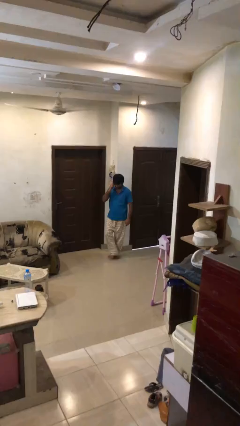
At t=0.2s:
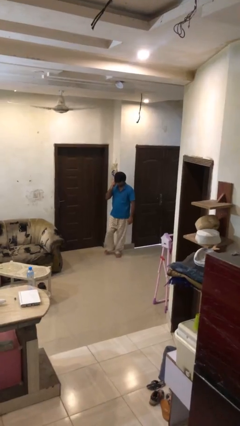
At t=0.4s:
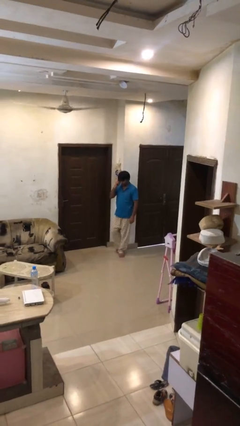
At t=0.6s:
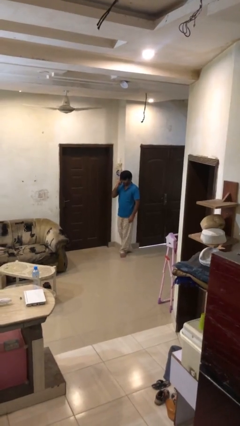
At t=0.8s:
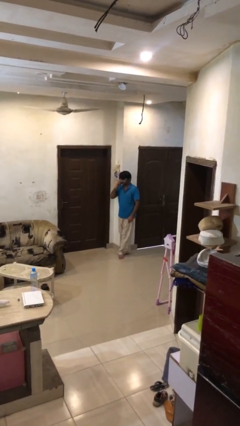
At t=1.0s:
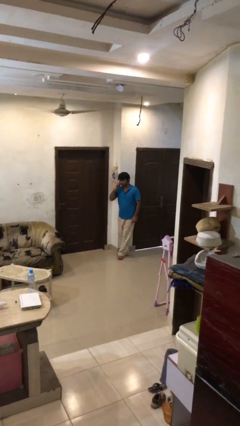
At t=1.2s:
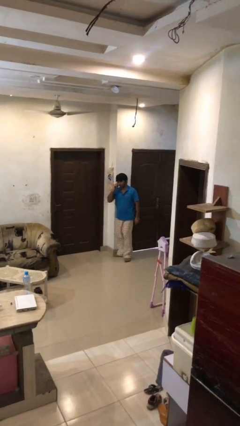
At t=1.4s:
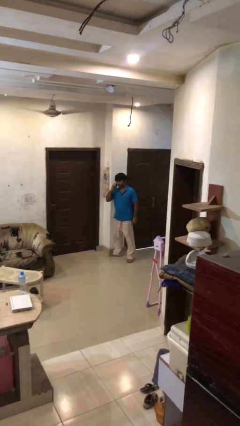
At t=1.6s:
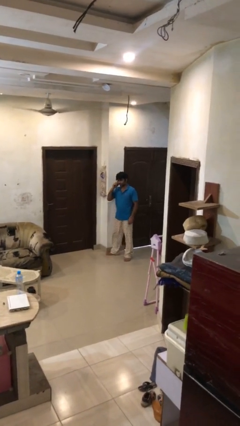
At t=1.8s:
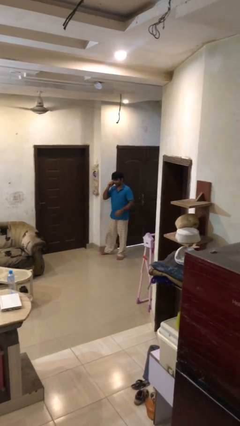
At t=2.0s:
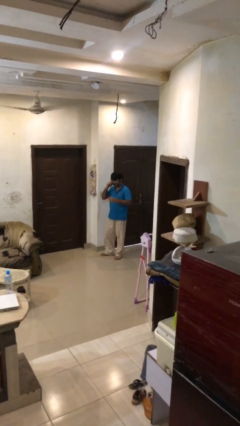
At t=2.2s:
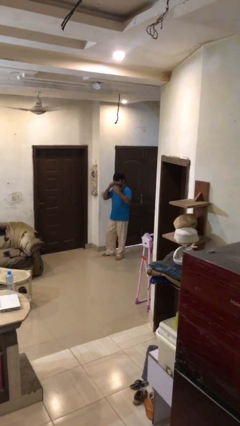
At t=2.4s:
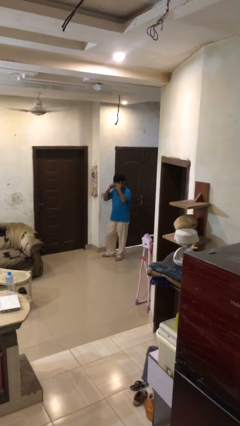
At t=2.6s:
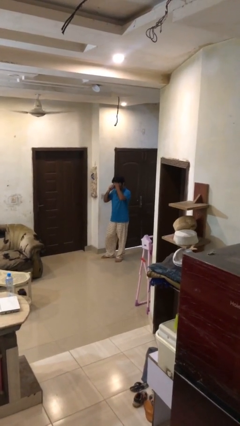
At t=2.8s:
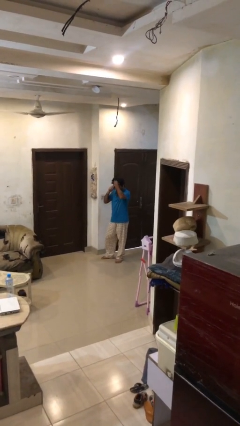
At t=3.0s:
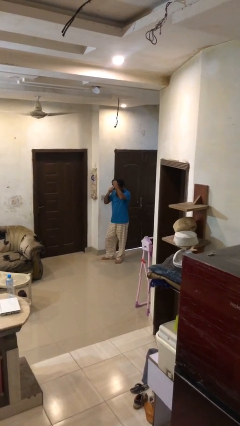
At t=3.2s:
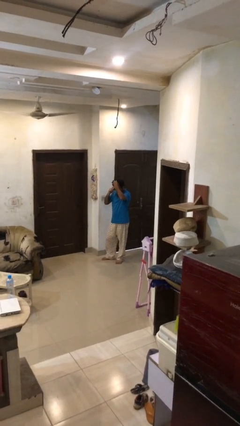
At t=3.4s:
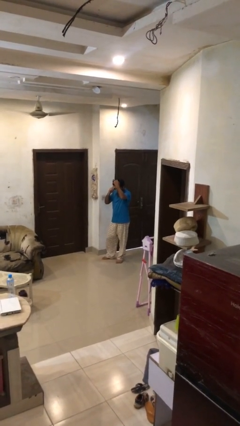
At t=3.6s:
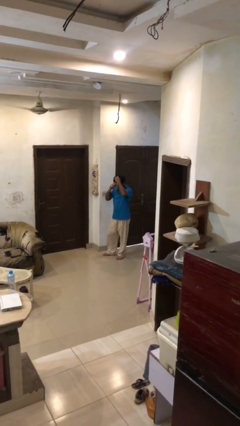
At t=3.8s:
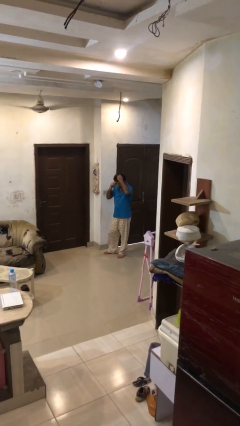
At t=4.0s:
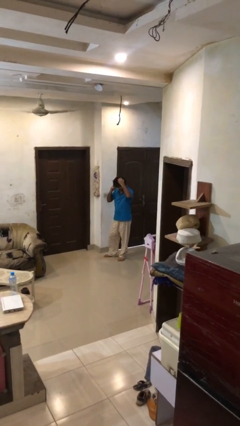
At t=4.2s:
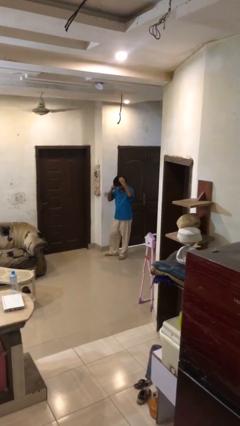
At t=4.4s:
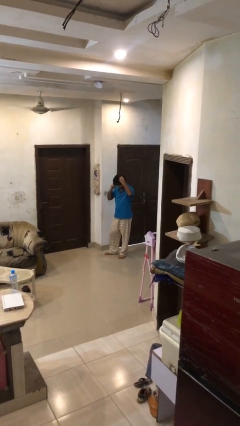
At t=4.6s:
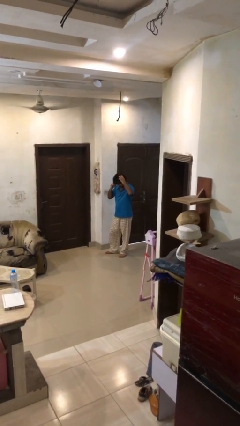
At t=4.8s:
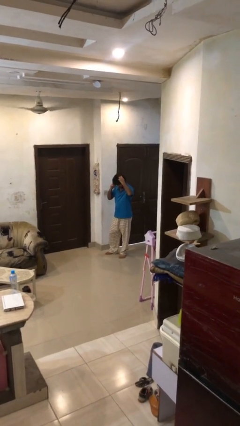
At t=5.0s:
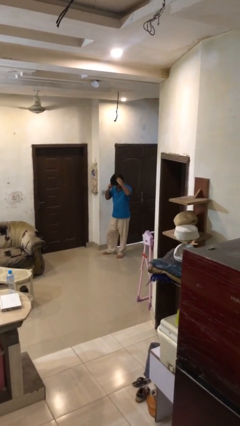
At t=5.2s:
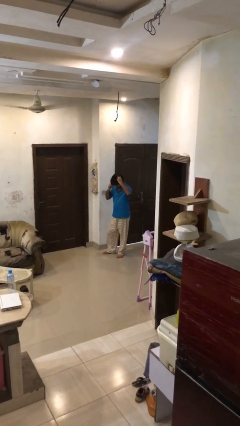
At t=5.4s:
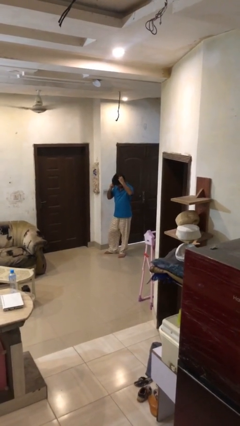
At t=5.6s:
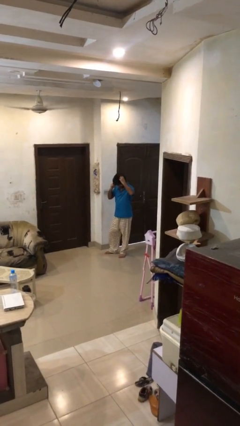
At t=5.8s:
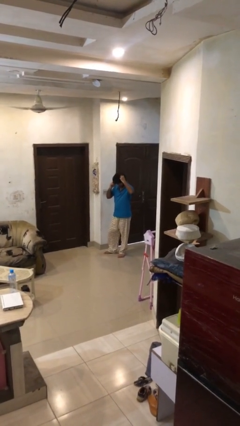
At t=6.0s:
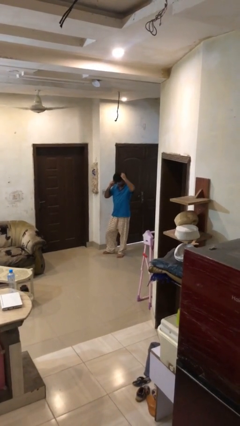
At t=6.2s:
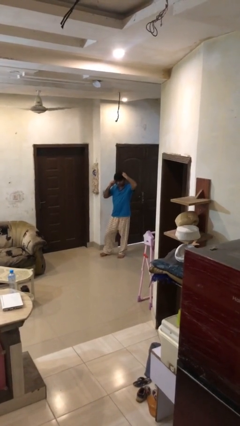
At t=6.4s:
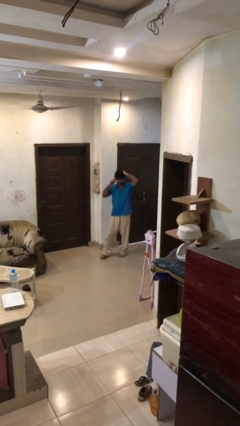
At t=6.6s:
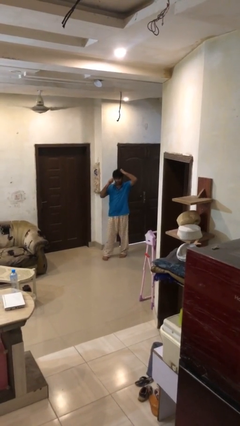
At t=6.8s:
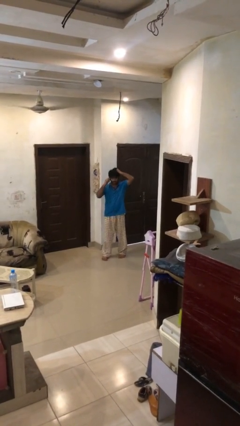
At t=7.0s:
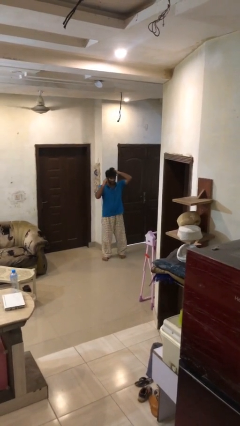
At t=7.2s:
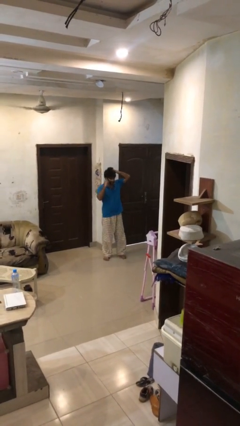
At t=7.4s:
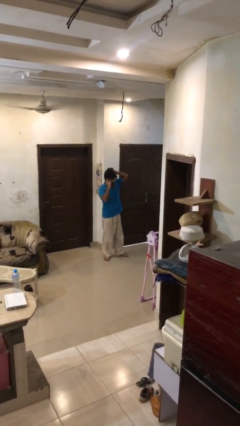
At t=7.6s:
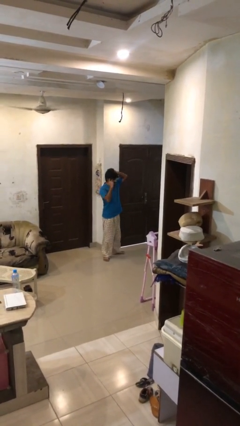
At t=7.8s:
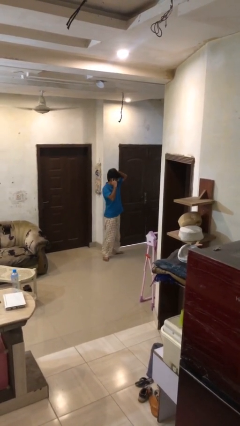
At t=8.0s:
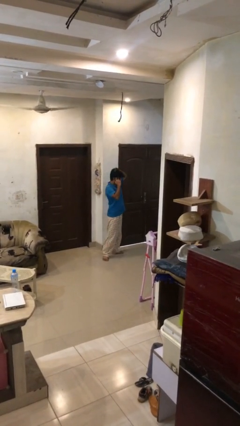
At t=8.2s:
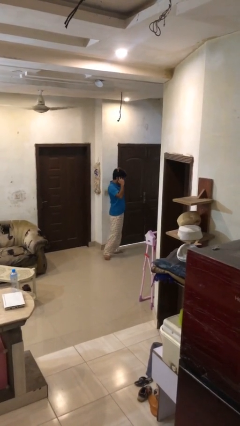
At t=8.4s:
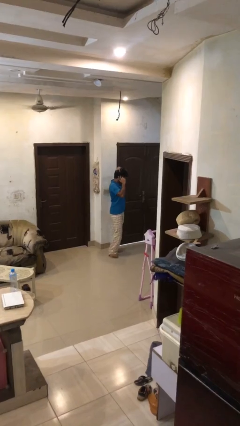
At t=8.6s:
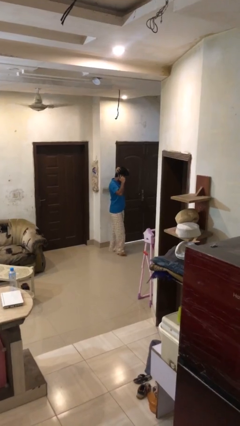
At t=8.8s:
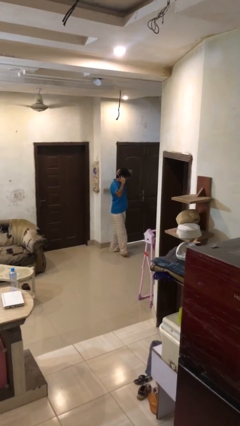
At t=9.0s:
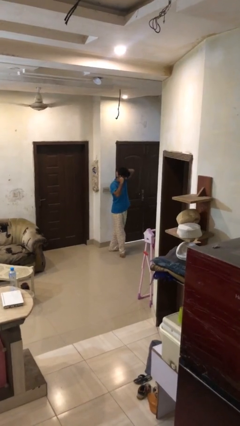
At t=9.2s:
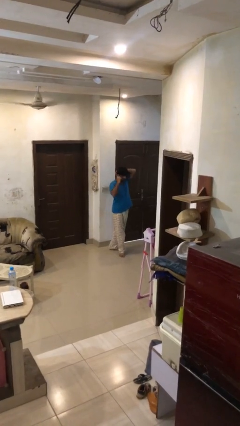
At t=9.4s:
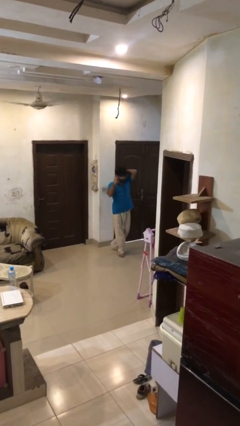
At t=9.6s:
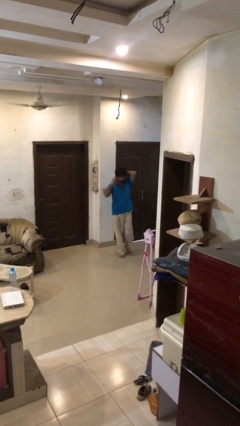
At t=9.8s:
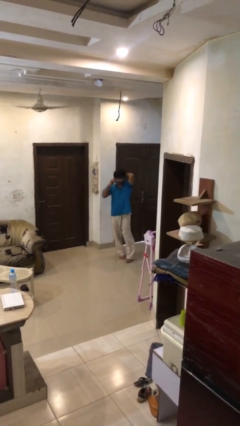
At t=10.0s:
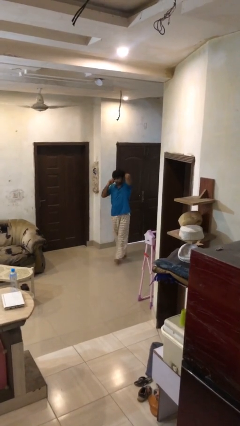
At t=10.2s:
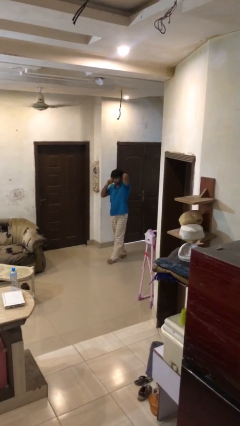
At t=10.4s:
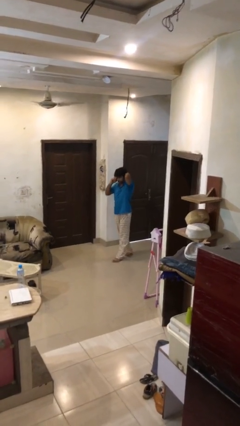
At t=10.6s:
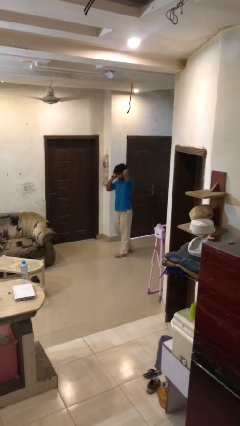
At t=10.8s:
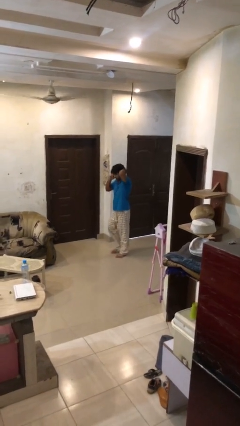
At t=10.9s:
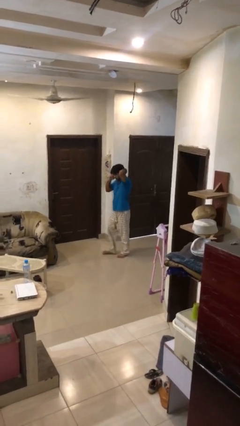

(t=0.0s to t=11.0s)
person talks on phone

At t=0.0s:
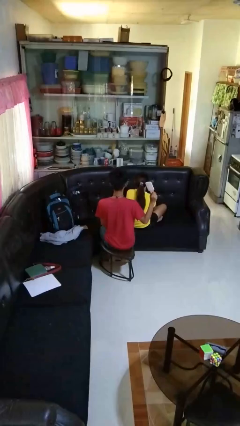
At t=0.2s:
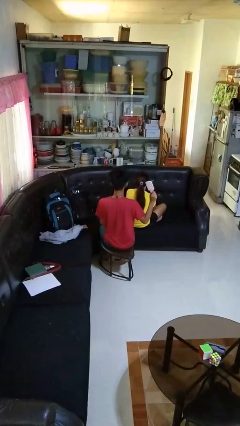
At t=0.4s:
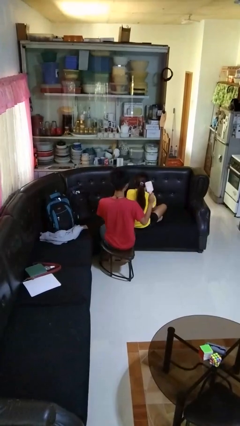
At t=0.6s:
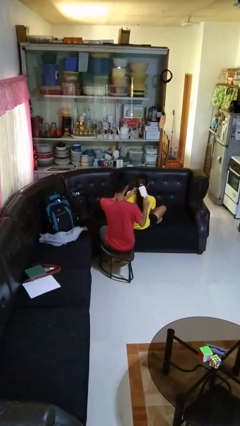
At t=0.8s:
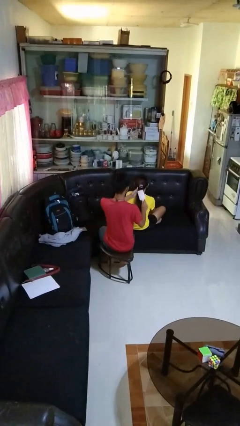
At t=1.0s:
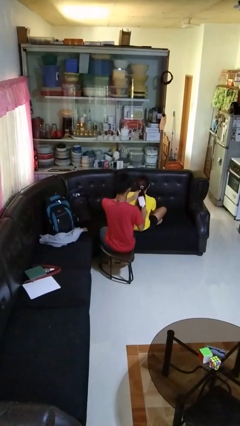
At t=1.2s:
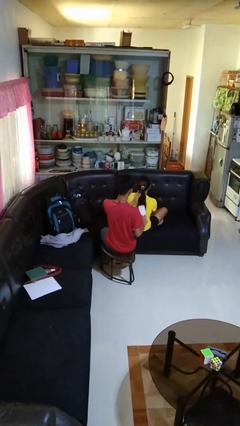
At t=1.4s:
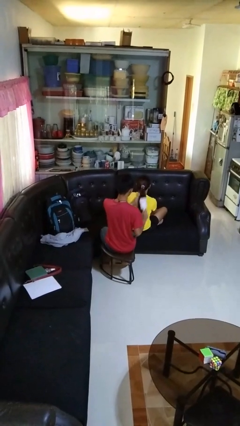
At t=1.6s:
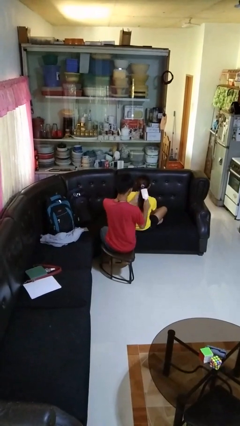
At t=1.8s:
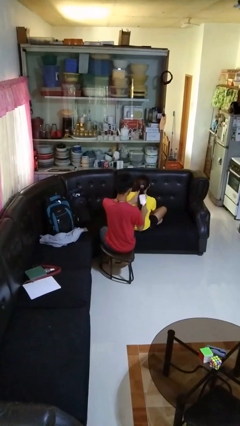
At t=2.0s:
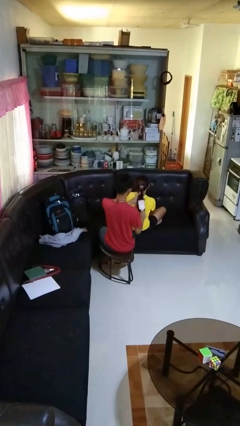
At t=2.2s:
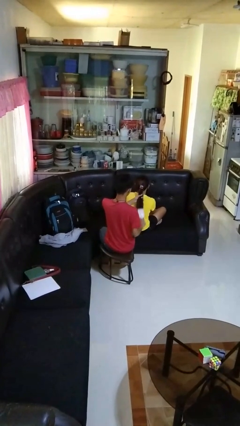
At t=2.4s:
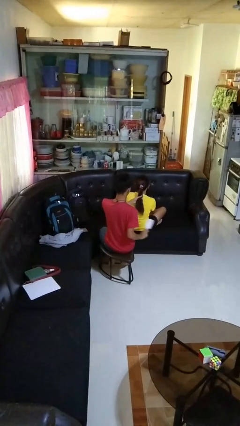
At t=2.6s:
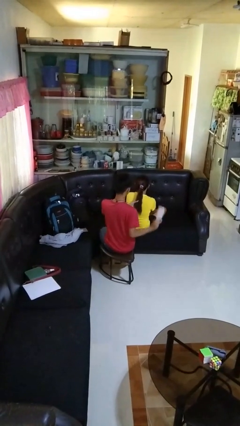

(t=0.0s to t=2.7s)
person brushes hair of person

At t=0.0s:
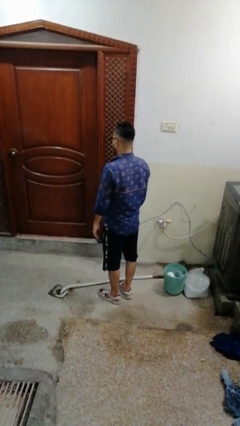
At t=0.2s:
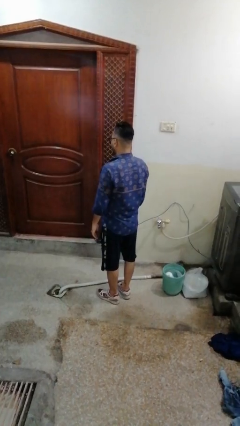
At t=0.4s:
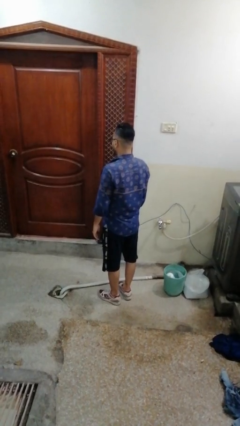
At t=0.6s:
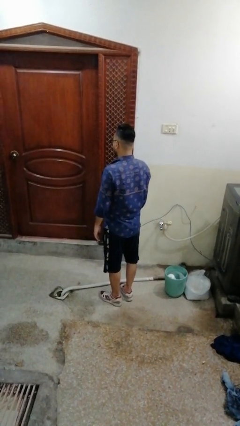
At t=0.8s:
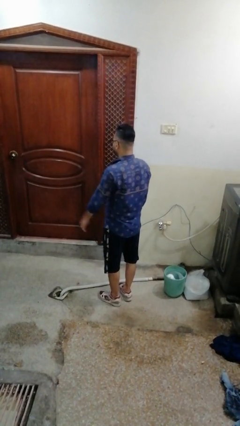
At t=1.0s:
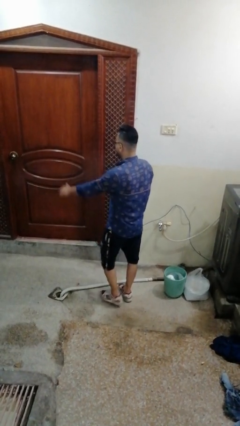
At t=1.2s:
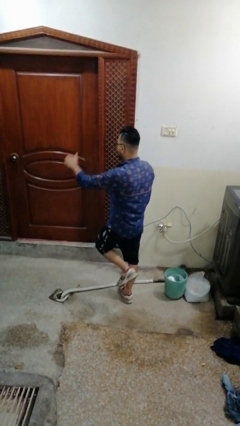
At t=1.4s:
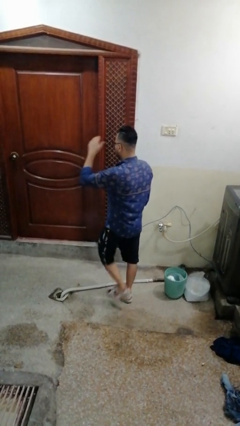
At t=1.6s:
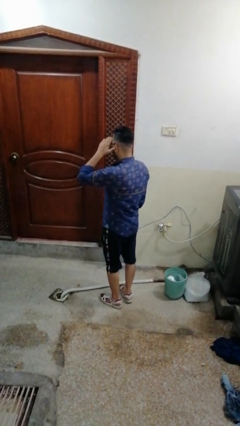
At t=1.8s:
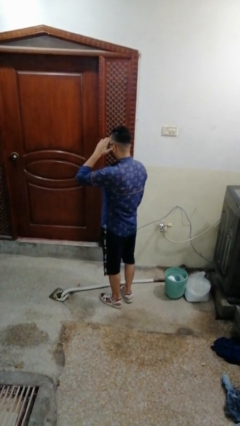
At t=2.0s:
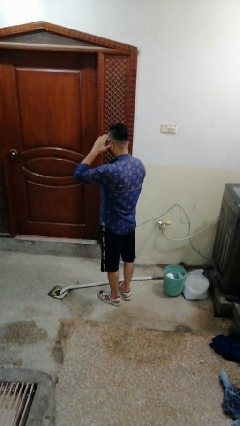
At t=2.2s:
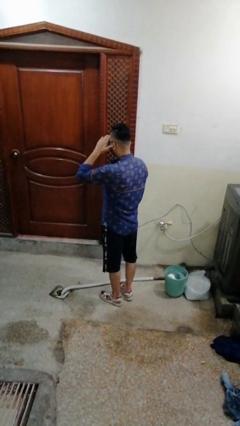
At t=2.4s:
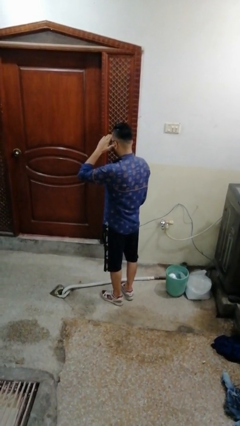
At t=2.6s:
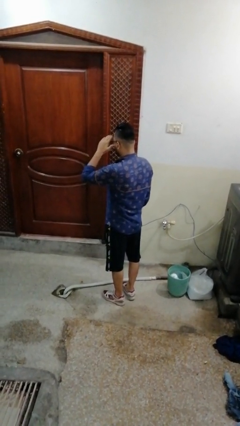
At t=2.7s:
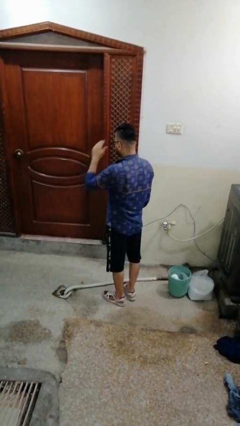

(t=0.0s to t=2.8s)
person salutes

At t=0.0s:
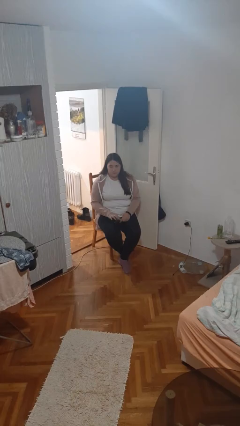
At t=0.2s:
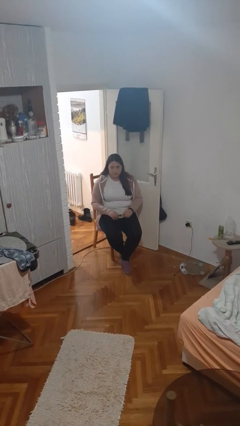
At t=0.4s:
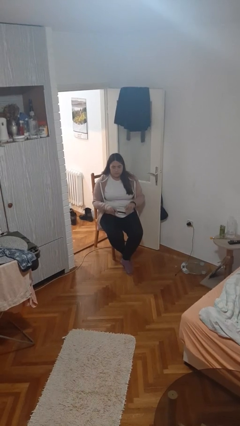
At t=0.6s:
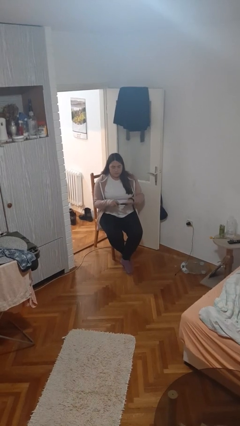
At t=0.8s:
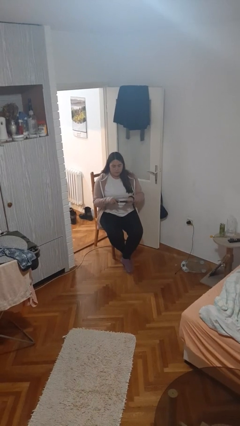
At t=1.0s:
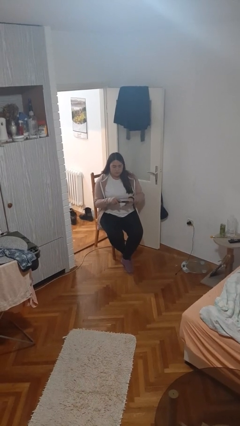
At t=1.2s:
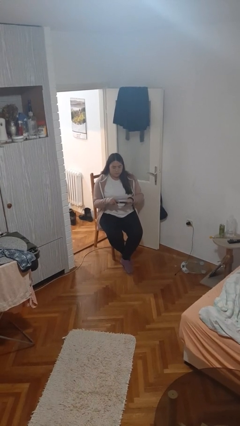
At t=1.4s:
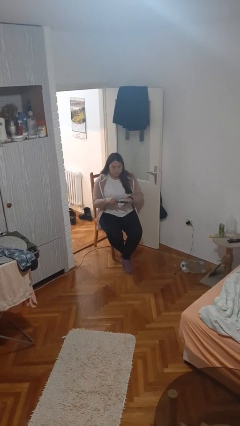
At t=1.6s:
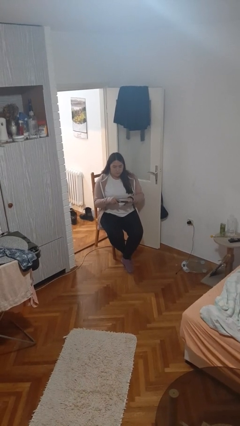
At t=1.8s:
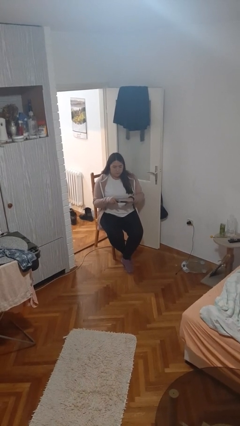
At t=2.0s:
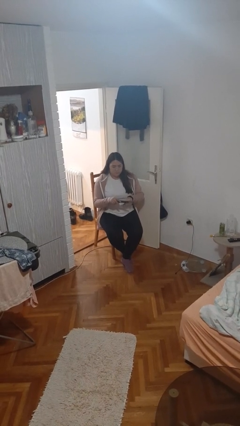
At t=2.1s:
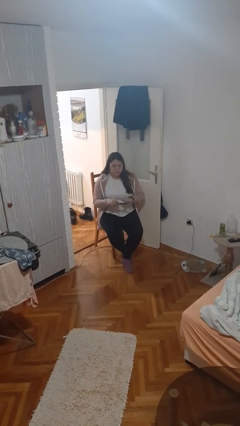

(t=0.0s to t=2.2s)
person files fingernails
